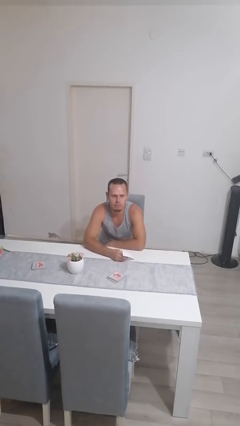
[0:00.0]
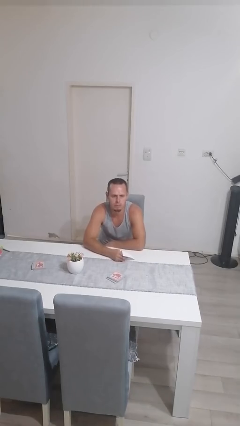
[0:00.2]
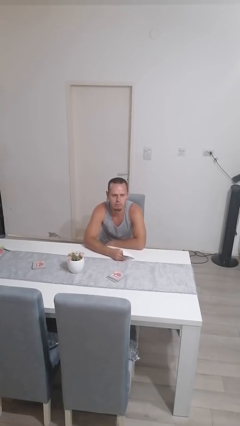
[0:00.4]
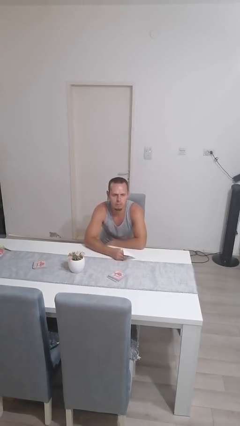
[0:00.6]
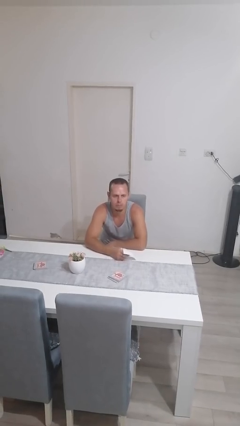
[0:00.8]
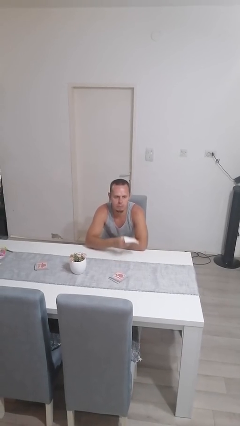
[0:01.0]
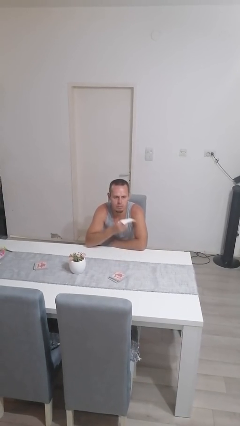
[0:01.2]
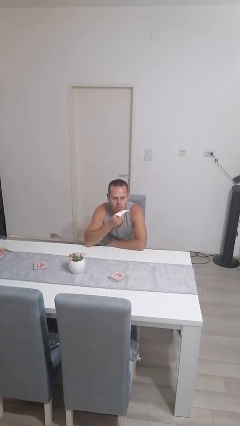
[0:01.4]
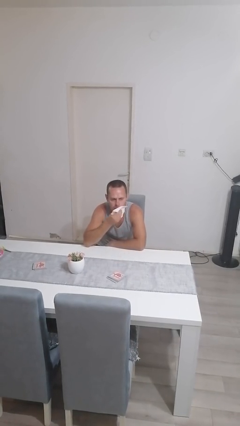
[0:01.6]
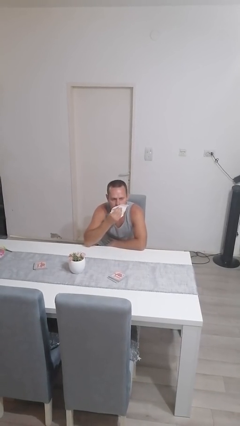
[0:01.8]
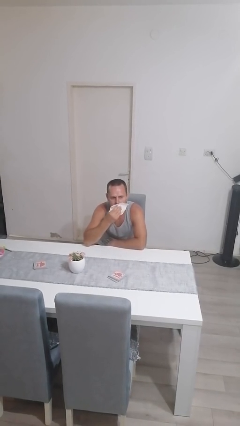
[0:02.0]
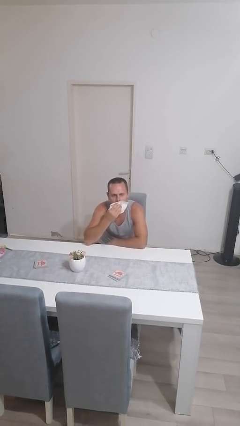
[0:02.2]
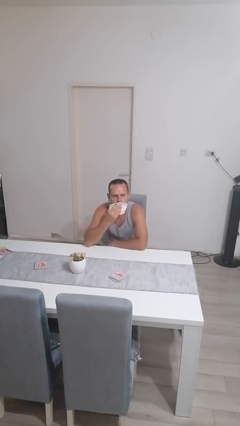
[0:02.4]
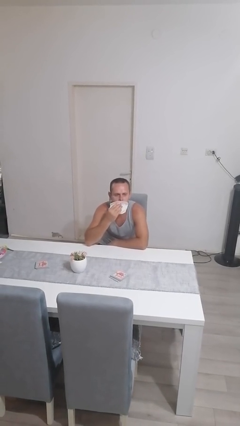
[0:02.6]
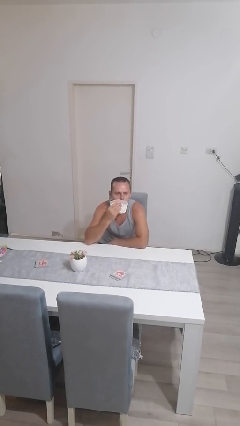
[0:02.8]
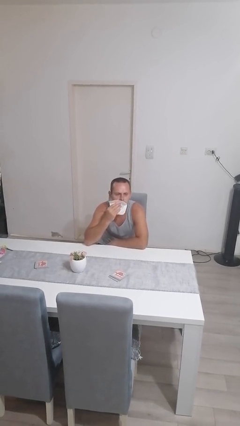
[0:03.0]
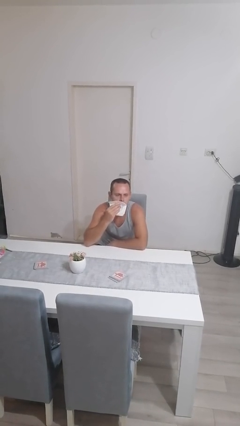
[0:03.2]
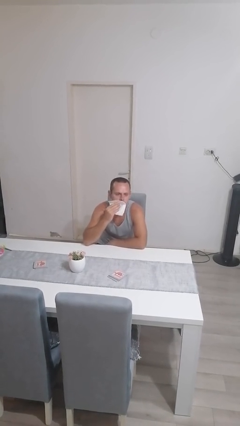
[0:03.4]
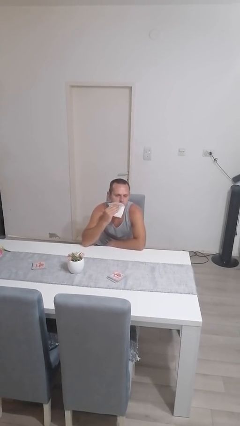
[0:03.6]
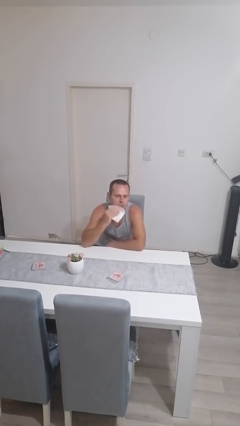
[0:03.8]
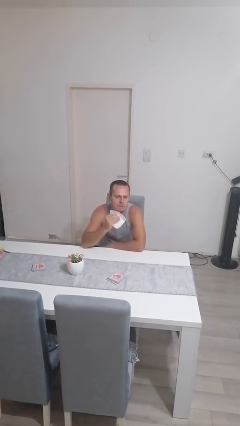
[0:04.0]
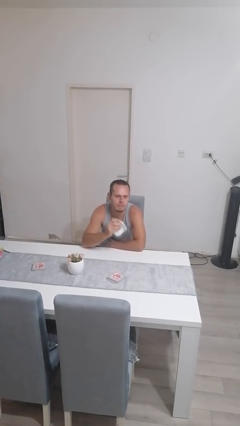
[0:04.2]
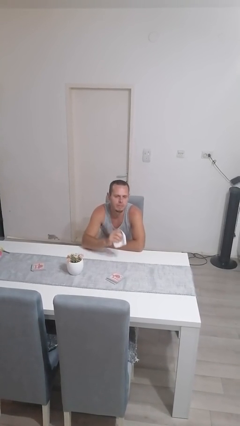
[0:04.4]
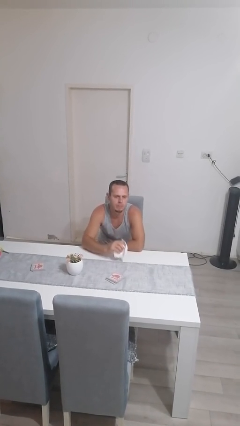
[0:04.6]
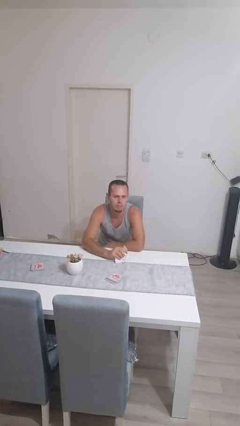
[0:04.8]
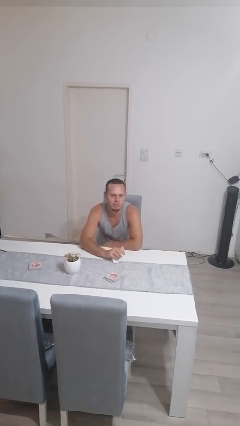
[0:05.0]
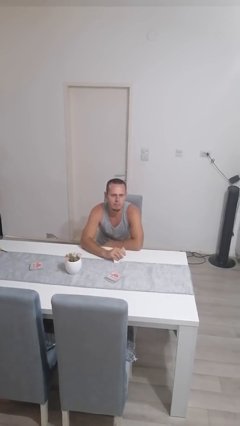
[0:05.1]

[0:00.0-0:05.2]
person wipes mouth with napkin

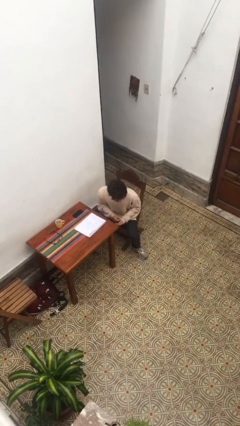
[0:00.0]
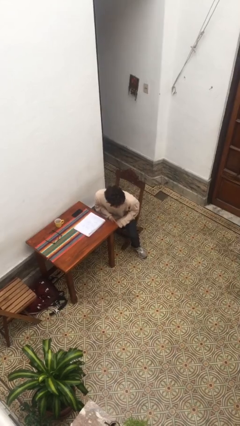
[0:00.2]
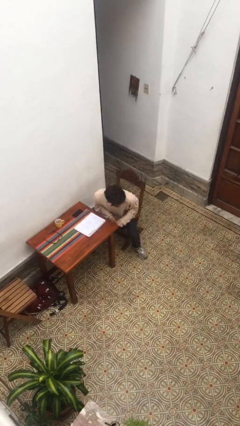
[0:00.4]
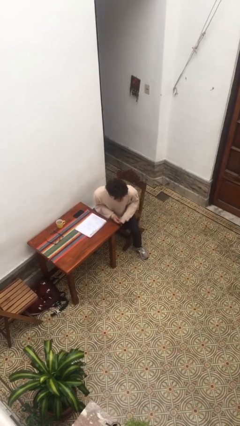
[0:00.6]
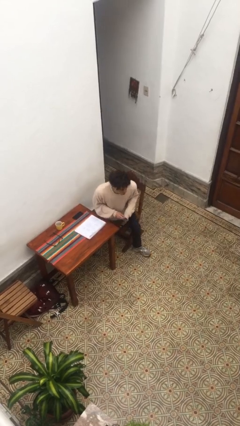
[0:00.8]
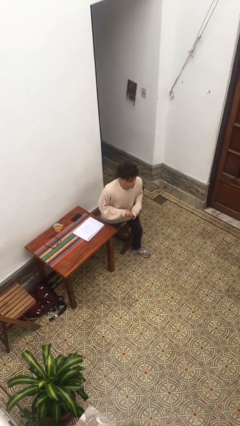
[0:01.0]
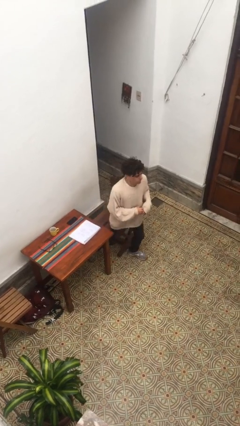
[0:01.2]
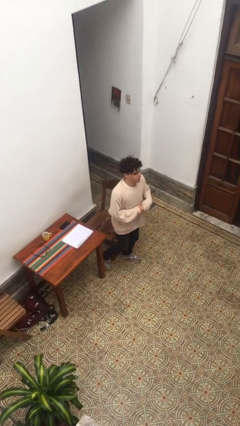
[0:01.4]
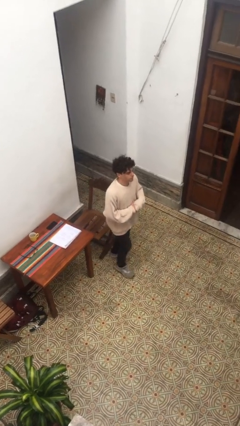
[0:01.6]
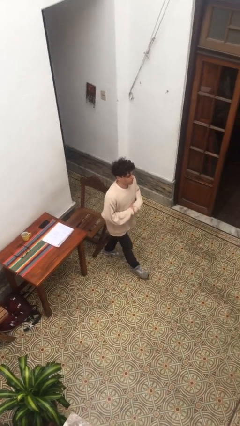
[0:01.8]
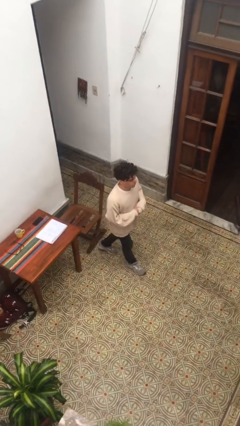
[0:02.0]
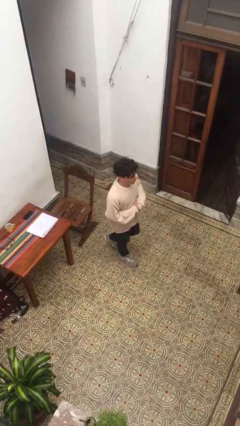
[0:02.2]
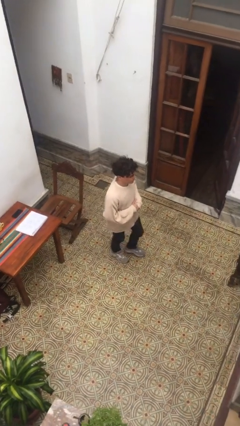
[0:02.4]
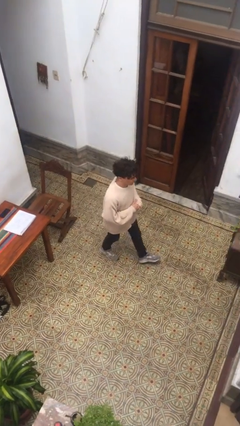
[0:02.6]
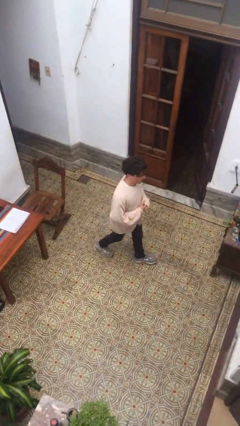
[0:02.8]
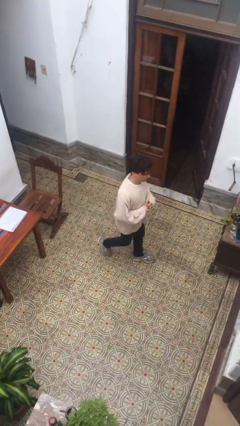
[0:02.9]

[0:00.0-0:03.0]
person stands up

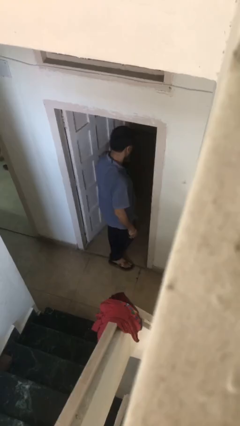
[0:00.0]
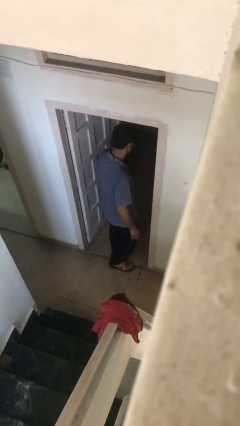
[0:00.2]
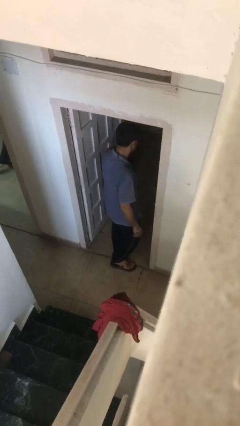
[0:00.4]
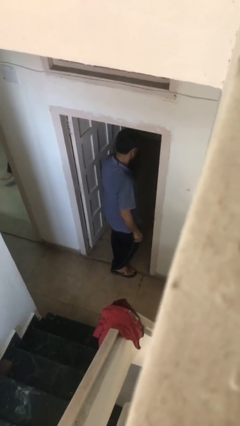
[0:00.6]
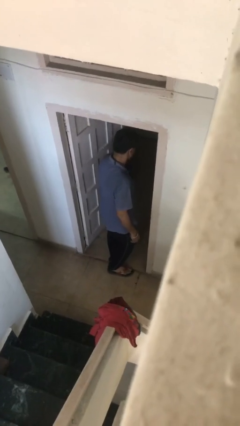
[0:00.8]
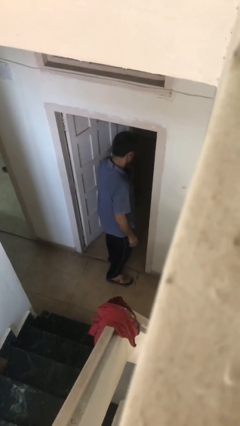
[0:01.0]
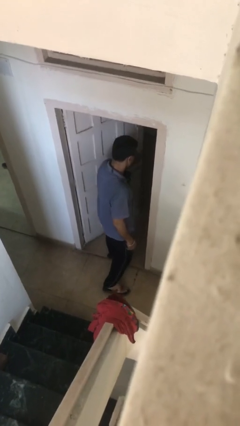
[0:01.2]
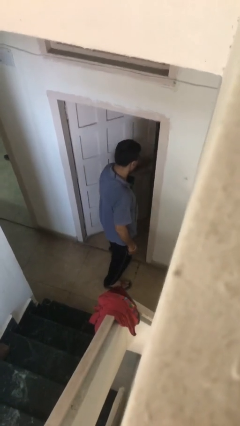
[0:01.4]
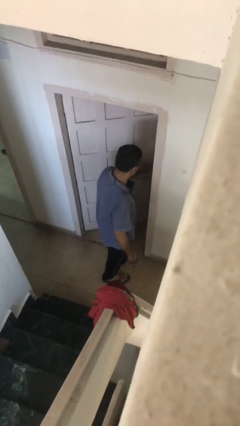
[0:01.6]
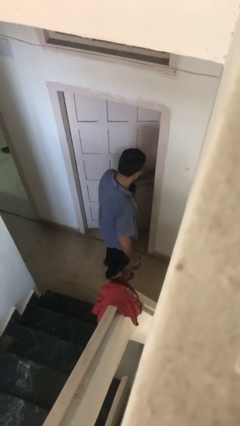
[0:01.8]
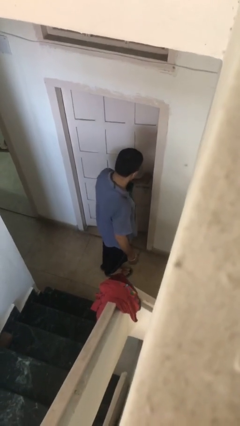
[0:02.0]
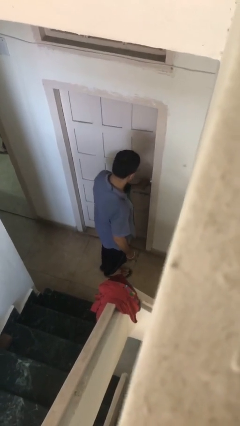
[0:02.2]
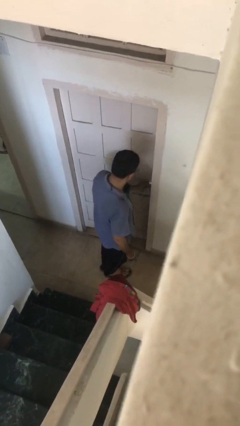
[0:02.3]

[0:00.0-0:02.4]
person closes facility door

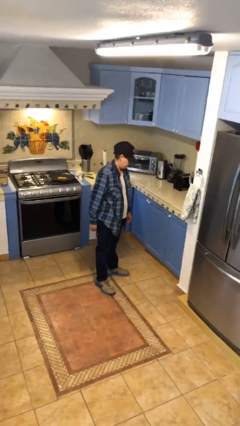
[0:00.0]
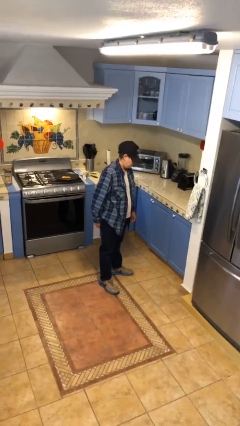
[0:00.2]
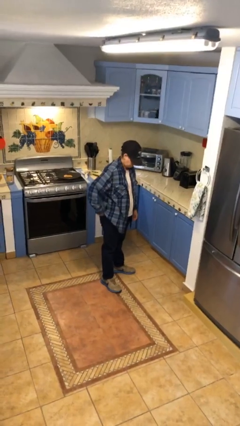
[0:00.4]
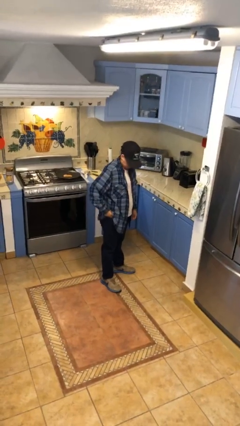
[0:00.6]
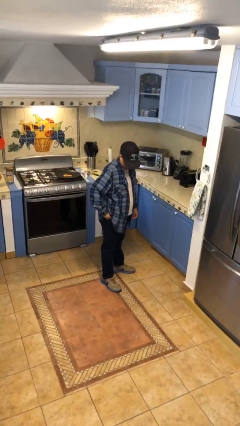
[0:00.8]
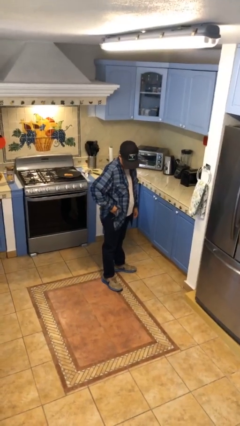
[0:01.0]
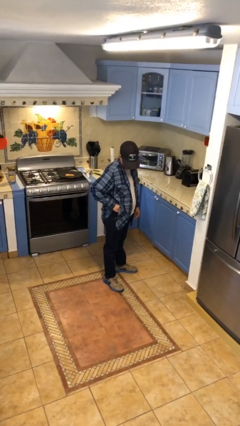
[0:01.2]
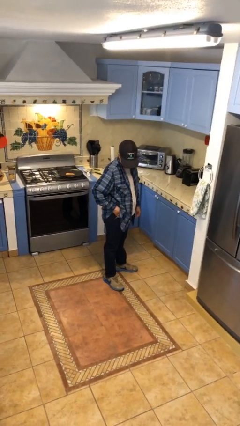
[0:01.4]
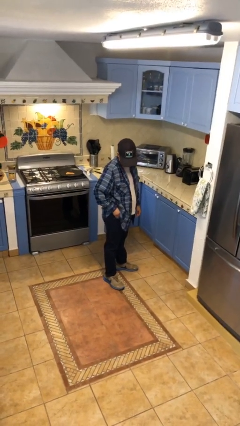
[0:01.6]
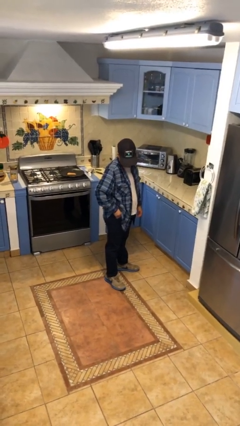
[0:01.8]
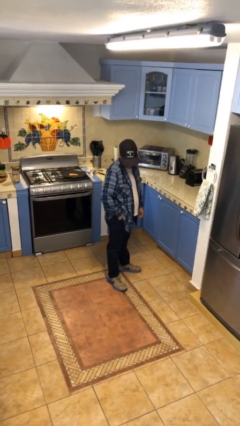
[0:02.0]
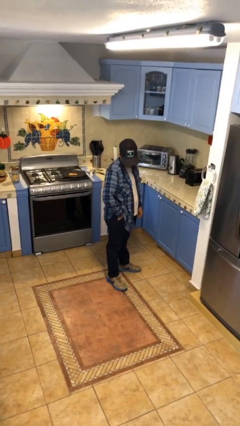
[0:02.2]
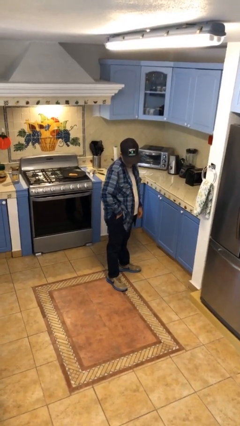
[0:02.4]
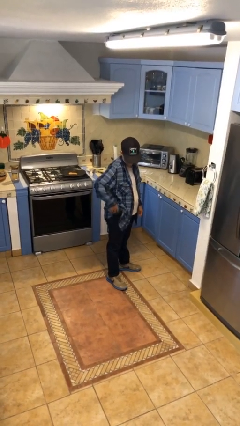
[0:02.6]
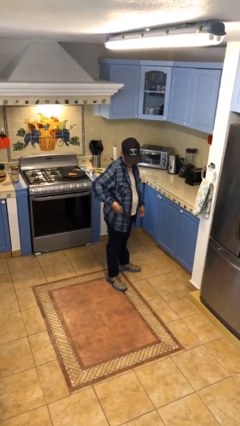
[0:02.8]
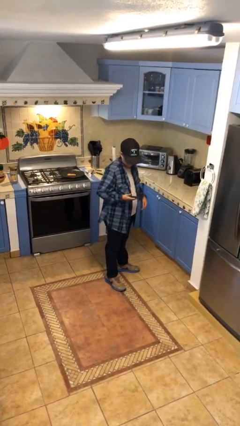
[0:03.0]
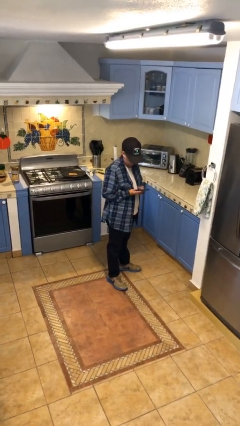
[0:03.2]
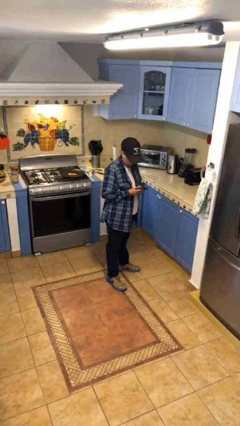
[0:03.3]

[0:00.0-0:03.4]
person takes phone from pocket

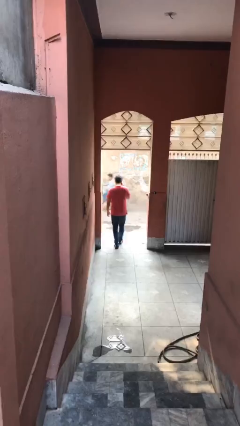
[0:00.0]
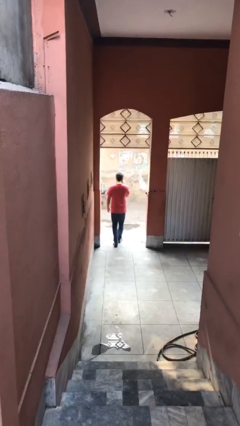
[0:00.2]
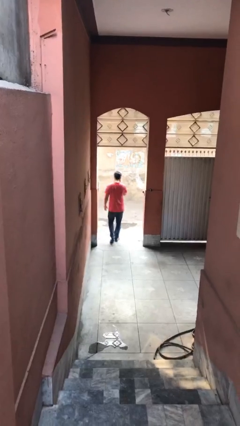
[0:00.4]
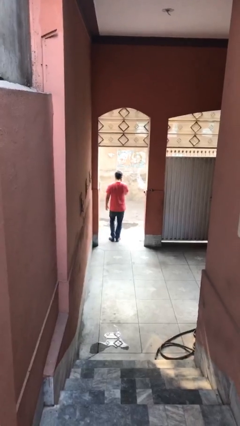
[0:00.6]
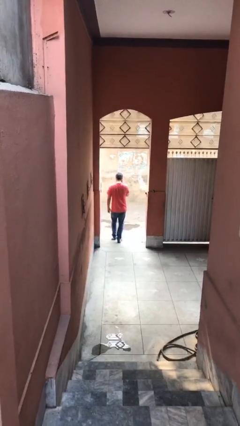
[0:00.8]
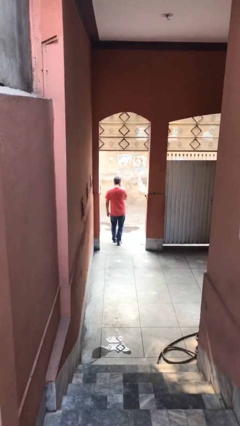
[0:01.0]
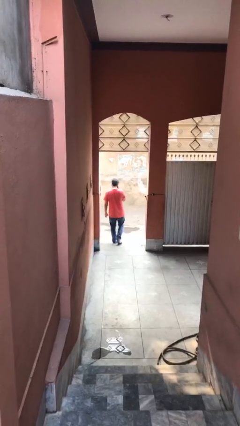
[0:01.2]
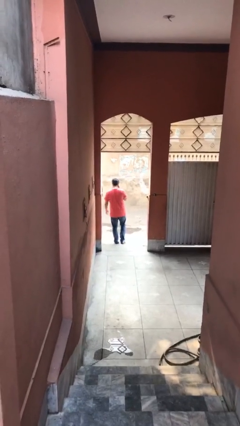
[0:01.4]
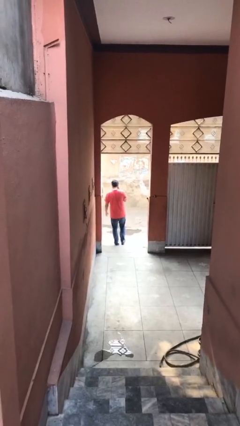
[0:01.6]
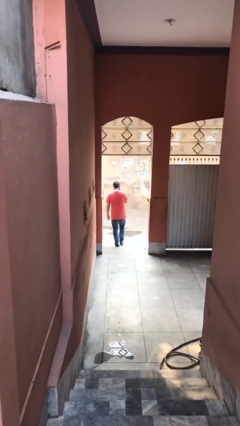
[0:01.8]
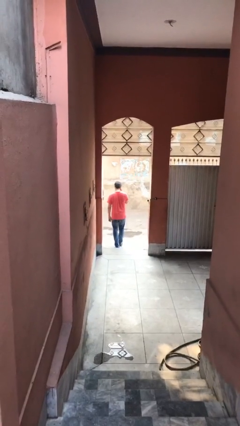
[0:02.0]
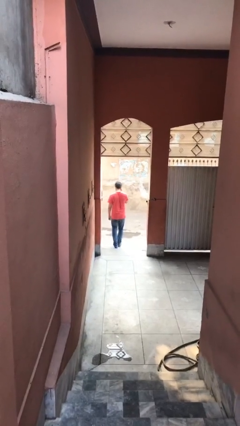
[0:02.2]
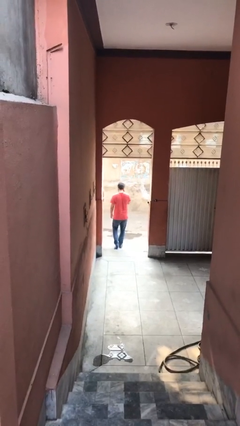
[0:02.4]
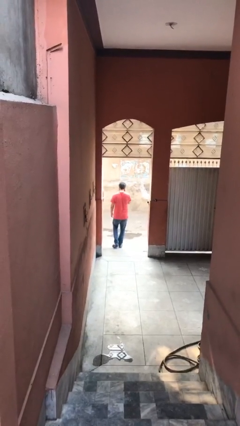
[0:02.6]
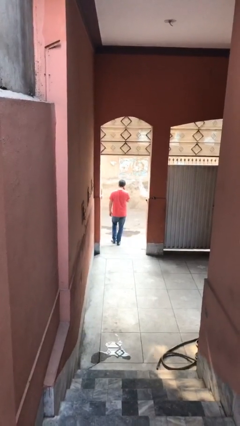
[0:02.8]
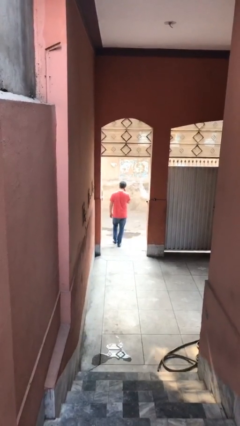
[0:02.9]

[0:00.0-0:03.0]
person exits scene through structure

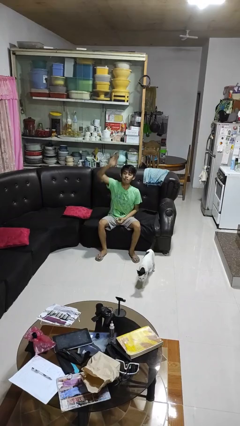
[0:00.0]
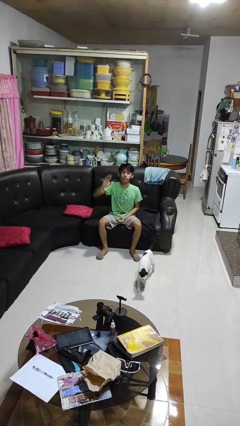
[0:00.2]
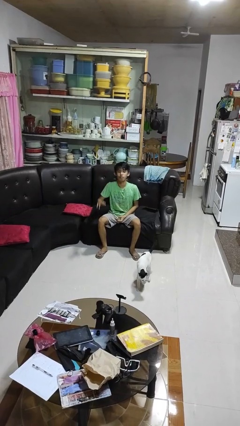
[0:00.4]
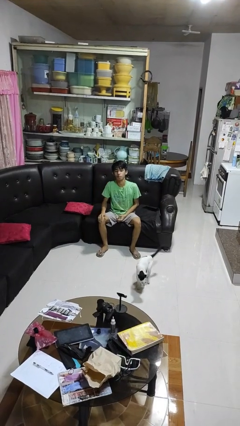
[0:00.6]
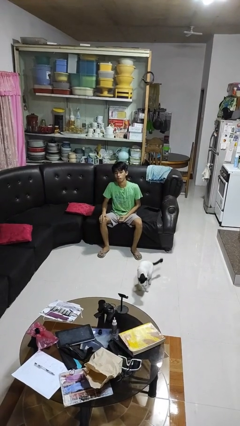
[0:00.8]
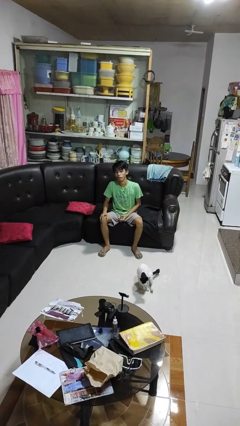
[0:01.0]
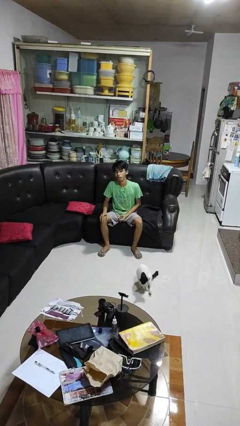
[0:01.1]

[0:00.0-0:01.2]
person gestures lower hand
